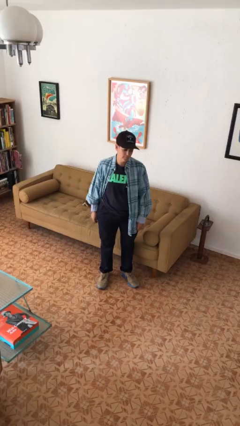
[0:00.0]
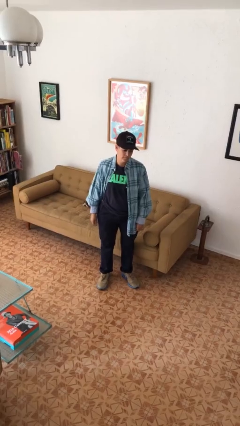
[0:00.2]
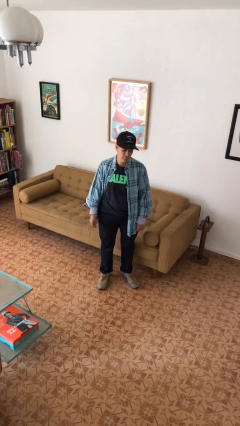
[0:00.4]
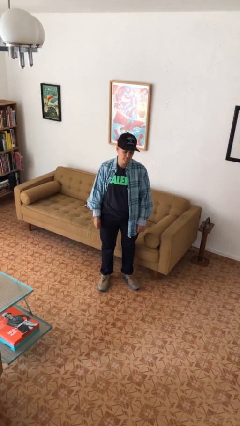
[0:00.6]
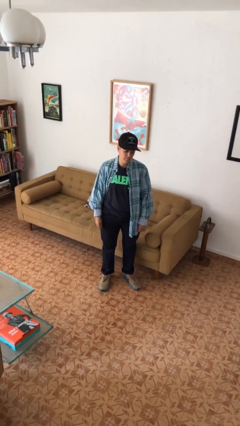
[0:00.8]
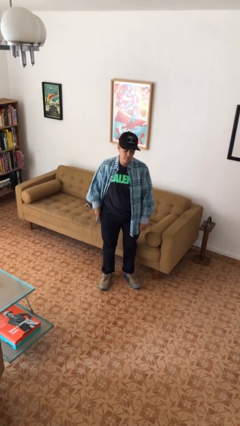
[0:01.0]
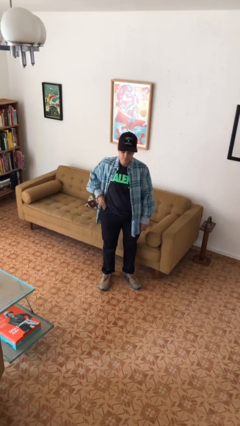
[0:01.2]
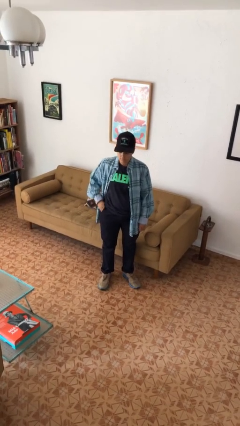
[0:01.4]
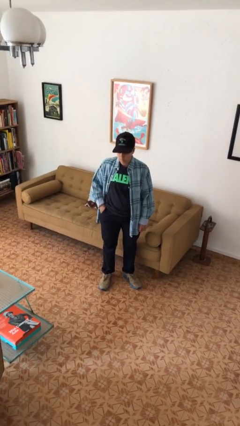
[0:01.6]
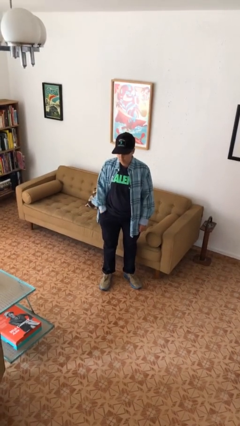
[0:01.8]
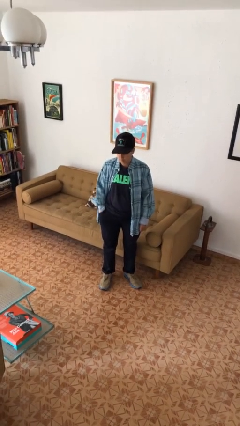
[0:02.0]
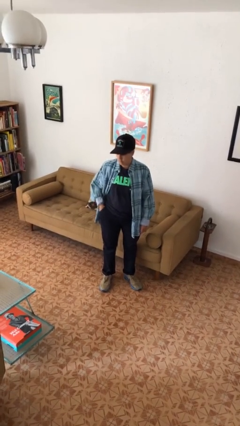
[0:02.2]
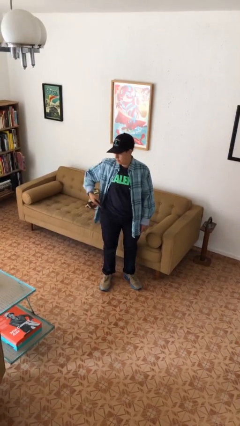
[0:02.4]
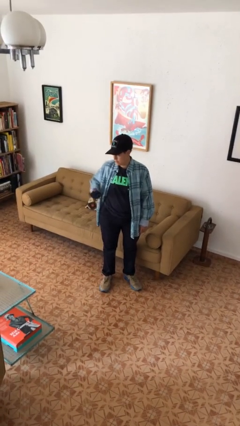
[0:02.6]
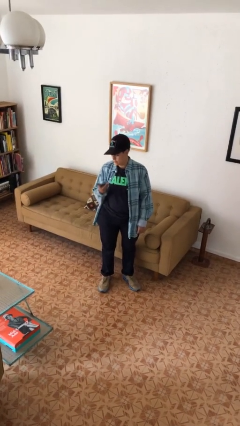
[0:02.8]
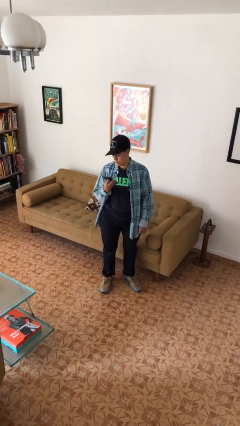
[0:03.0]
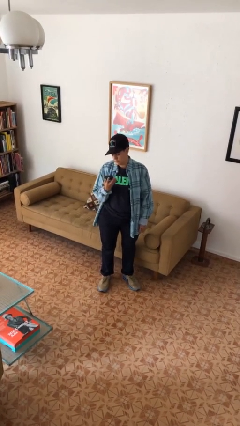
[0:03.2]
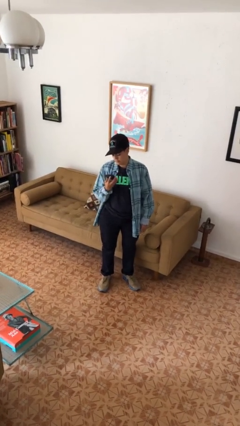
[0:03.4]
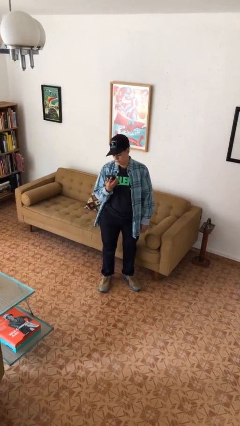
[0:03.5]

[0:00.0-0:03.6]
person takes phone from pocket

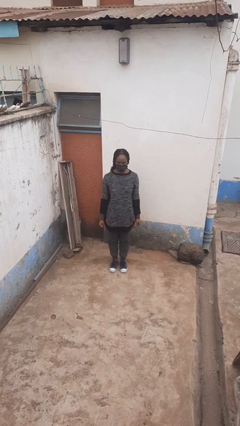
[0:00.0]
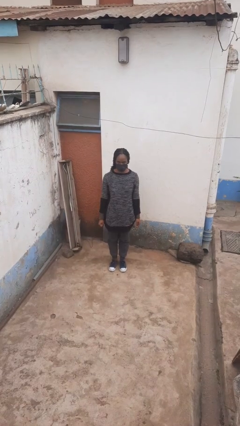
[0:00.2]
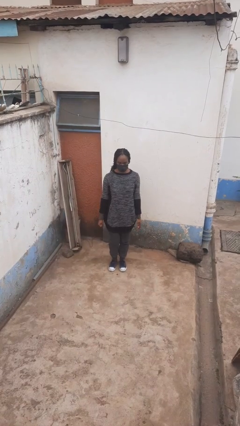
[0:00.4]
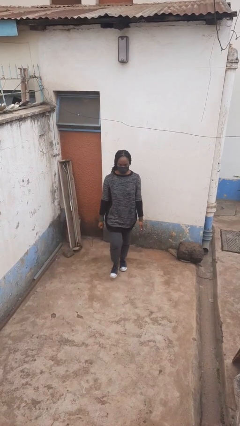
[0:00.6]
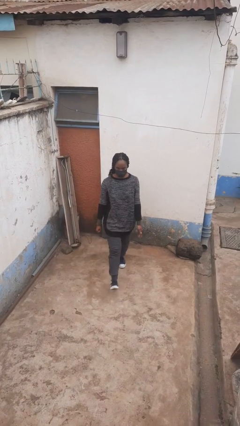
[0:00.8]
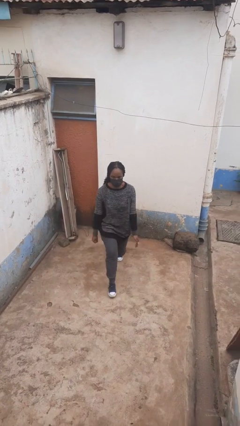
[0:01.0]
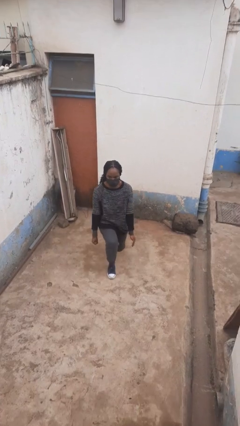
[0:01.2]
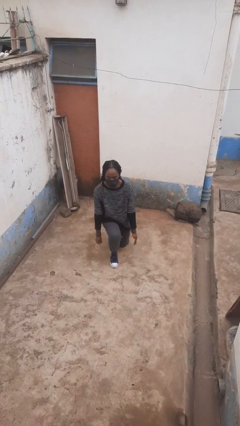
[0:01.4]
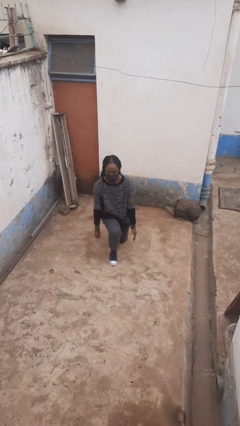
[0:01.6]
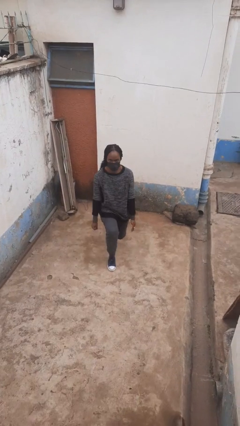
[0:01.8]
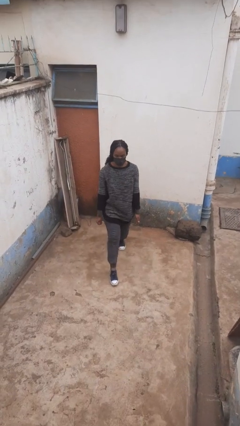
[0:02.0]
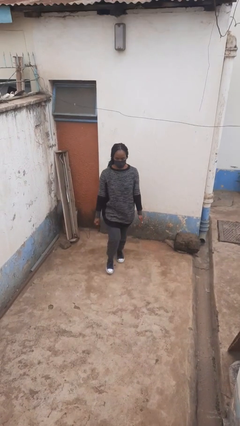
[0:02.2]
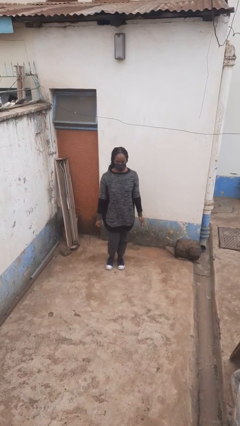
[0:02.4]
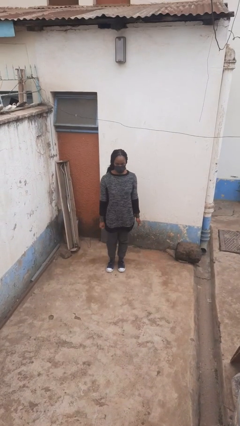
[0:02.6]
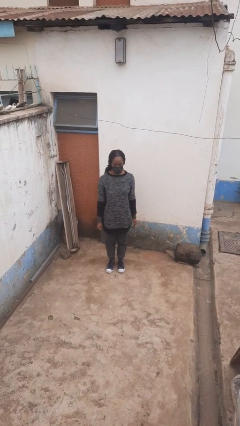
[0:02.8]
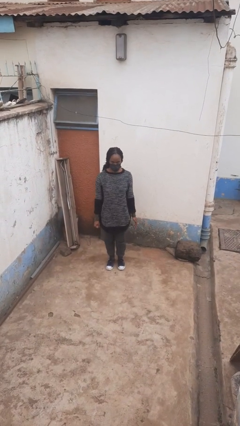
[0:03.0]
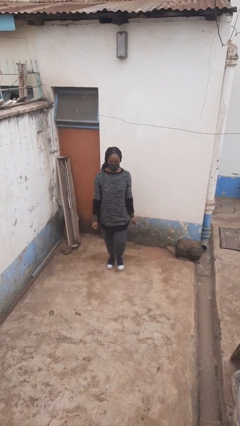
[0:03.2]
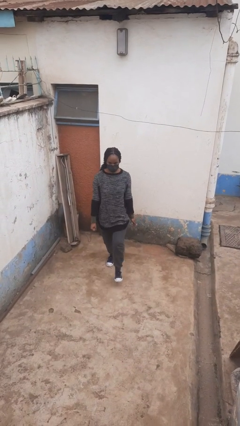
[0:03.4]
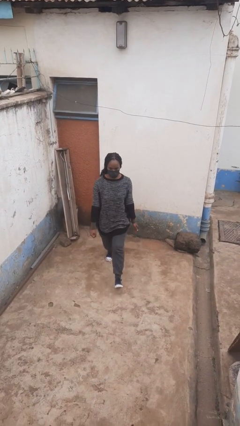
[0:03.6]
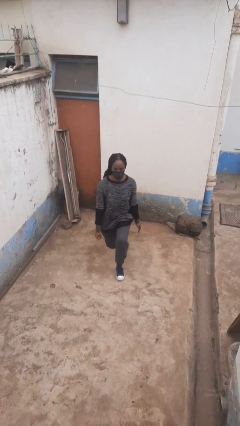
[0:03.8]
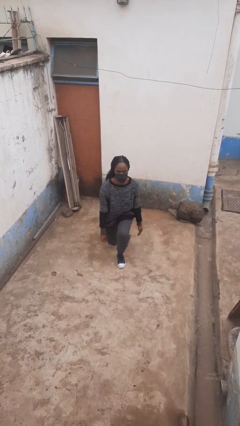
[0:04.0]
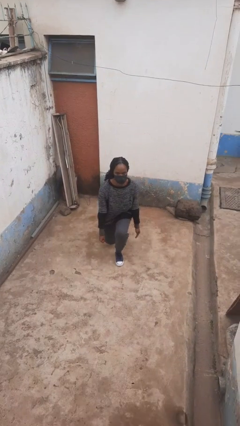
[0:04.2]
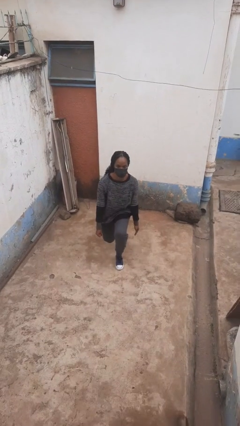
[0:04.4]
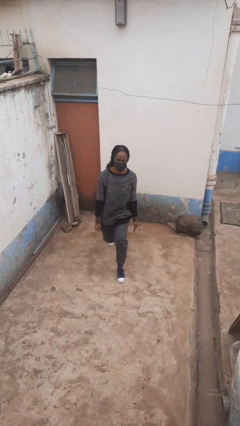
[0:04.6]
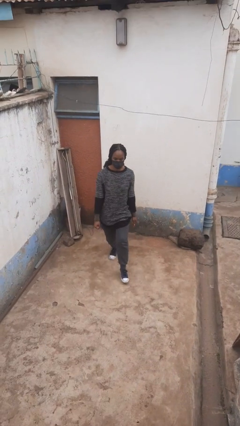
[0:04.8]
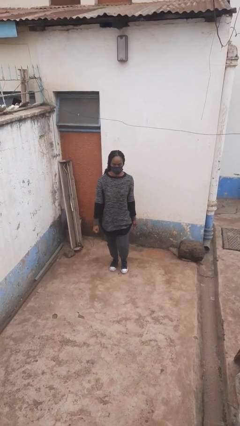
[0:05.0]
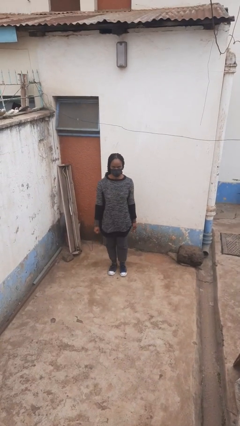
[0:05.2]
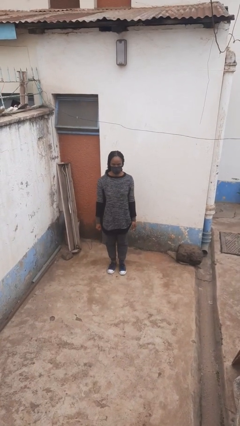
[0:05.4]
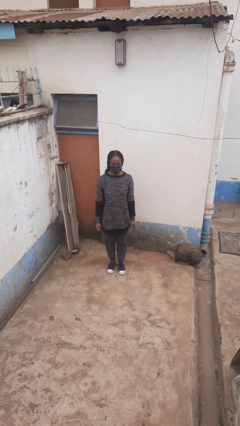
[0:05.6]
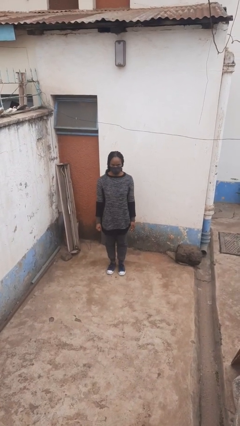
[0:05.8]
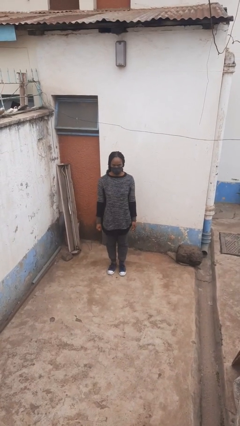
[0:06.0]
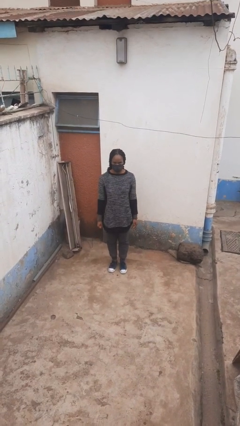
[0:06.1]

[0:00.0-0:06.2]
person exercises with lunges

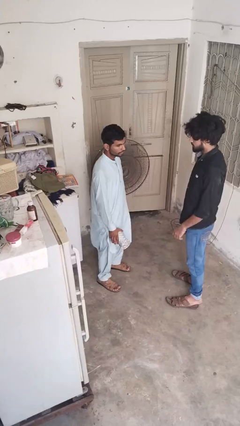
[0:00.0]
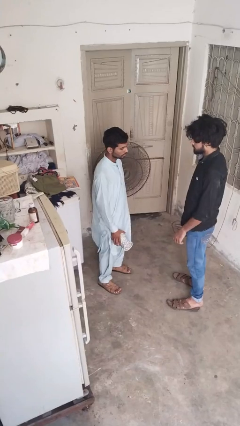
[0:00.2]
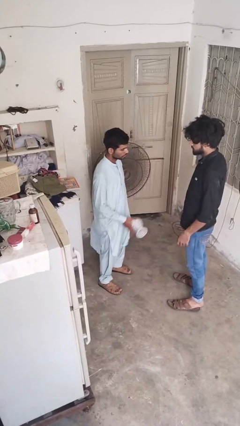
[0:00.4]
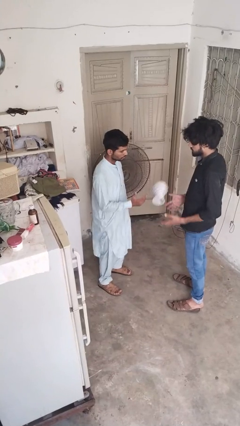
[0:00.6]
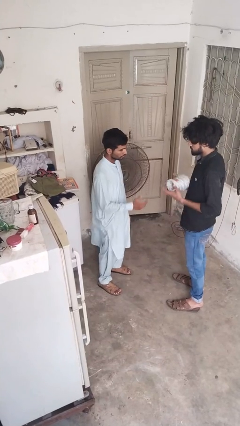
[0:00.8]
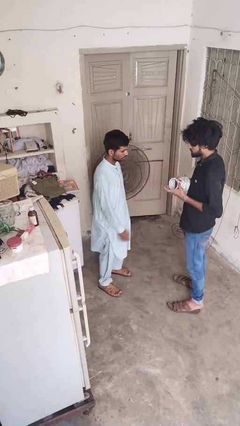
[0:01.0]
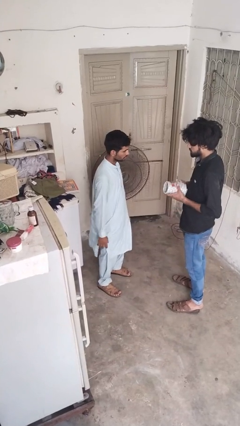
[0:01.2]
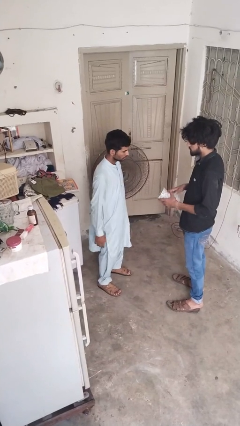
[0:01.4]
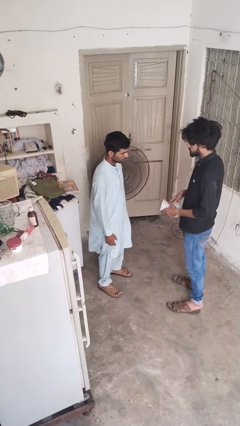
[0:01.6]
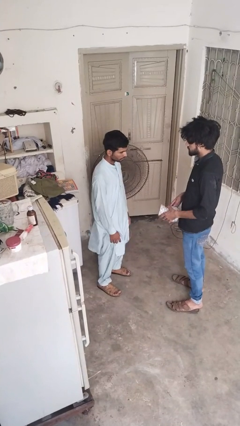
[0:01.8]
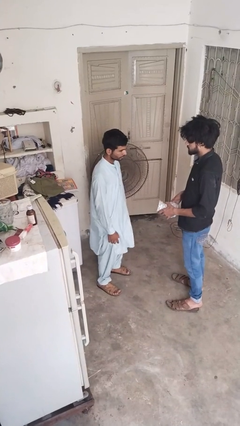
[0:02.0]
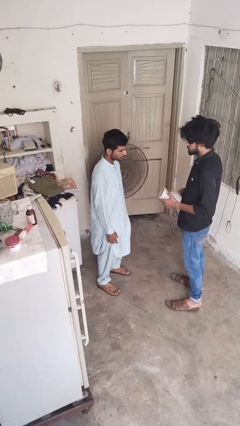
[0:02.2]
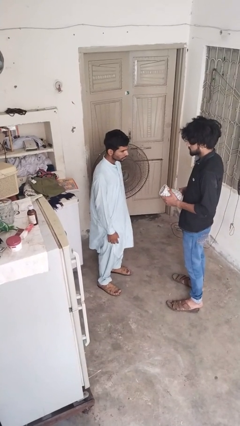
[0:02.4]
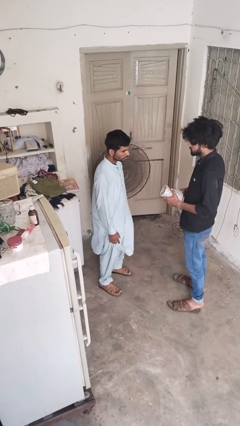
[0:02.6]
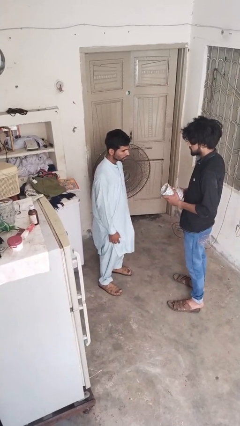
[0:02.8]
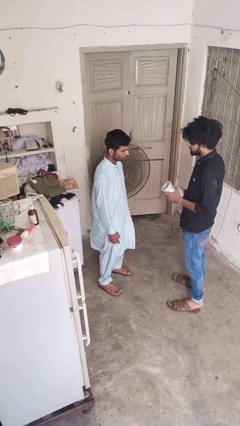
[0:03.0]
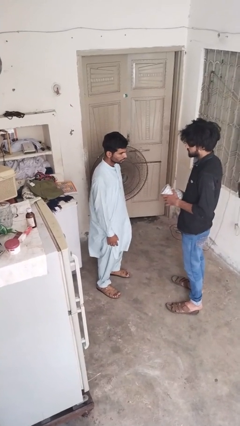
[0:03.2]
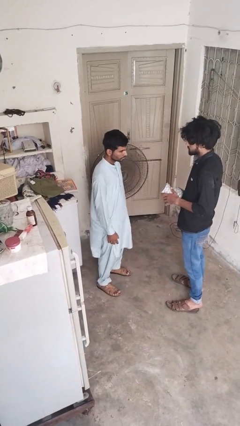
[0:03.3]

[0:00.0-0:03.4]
person throws object to person

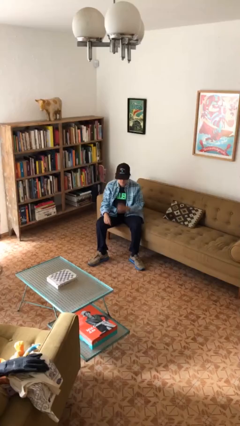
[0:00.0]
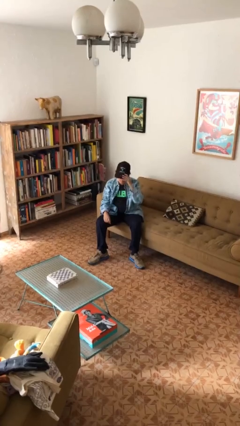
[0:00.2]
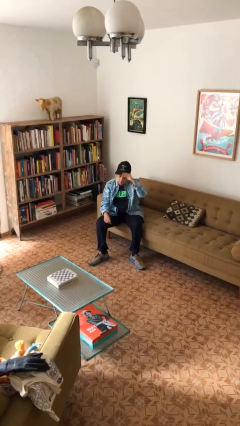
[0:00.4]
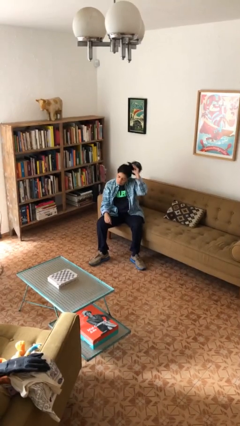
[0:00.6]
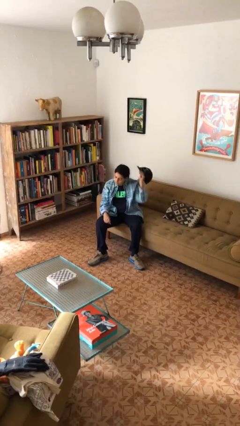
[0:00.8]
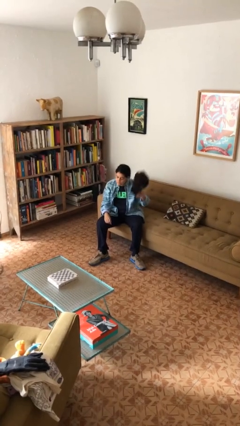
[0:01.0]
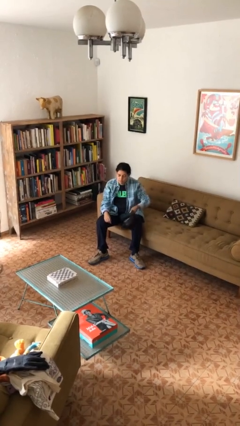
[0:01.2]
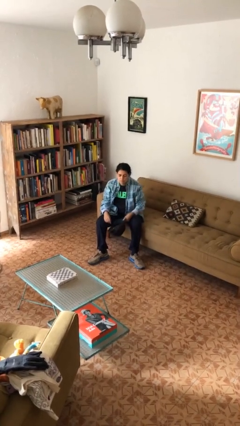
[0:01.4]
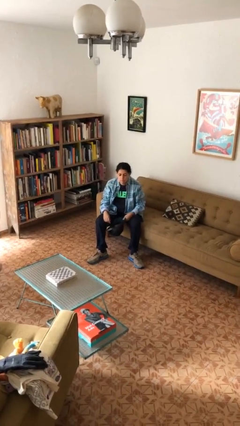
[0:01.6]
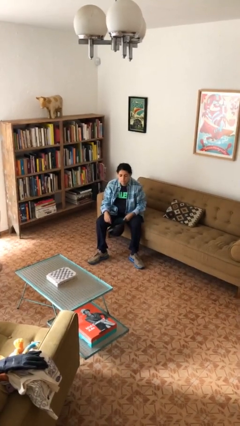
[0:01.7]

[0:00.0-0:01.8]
person takes off hat

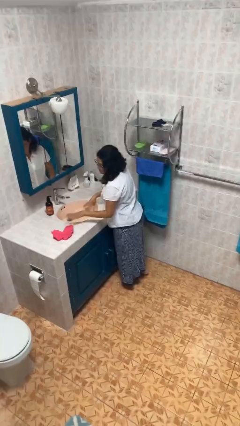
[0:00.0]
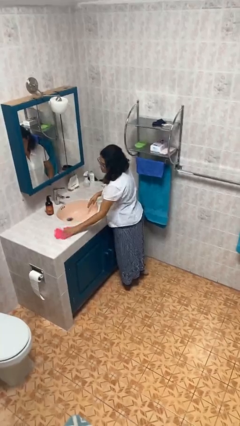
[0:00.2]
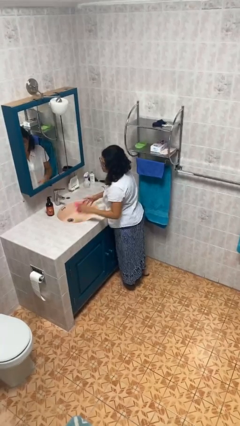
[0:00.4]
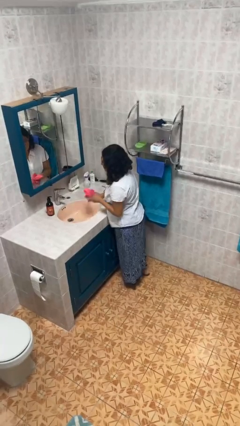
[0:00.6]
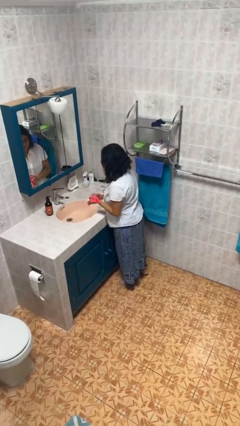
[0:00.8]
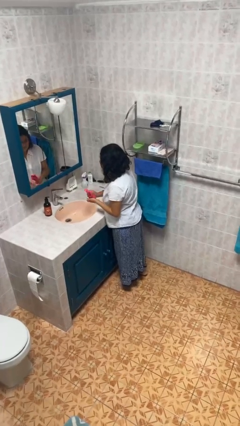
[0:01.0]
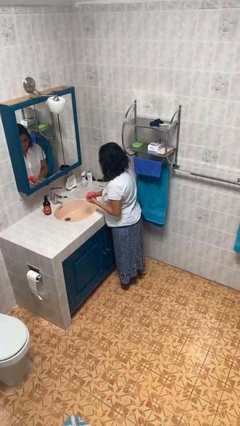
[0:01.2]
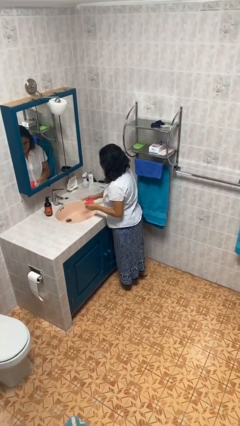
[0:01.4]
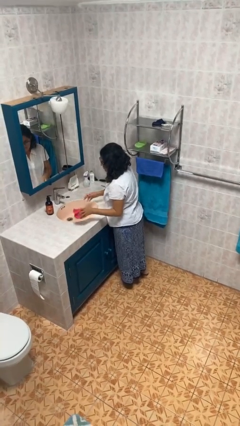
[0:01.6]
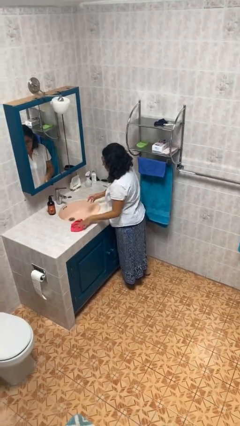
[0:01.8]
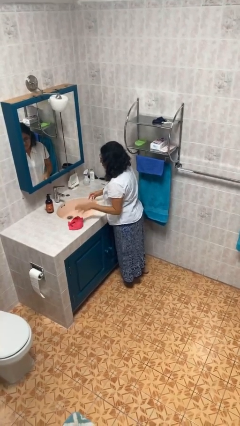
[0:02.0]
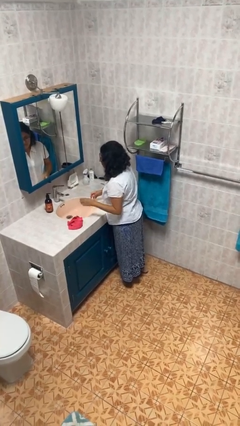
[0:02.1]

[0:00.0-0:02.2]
person dries hands with towel

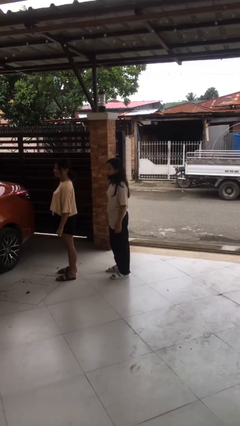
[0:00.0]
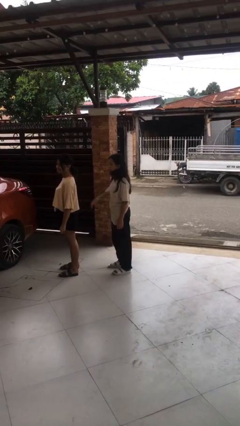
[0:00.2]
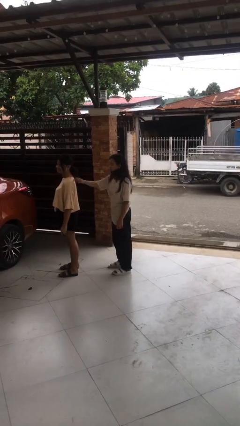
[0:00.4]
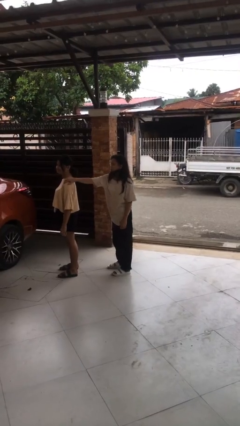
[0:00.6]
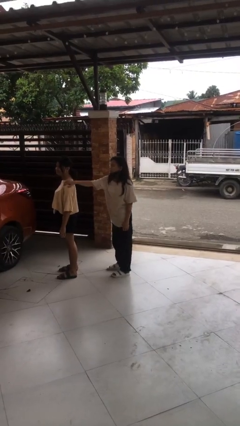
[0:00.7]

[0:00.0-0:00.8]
person grabs person by shoulder
